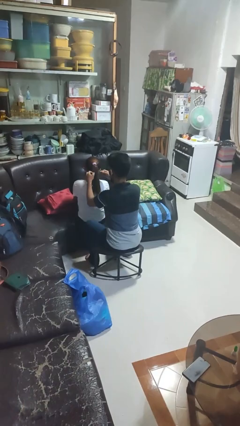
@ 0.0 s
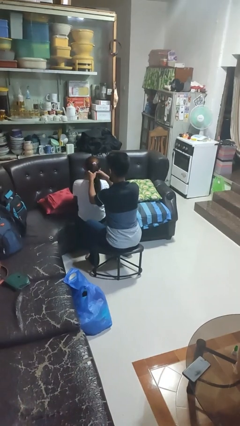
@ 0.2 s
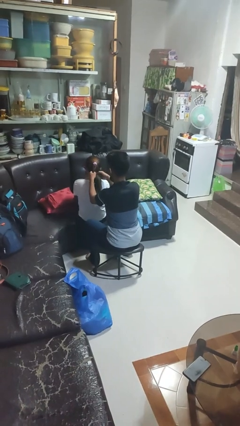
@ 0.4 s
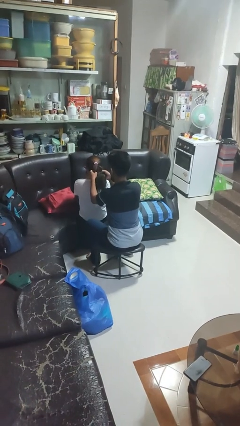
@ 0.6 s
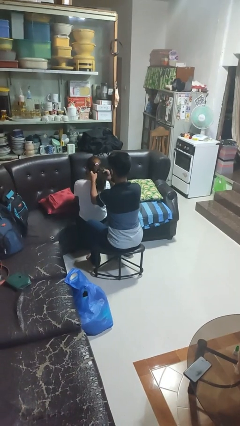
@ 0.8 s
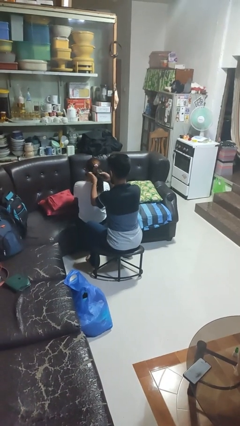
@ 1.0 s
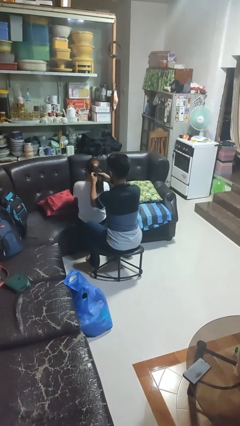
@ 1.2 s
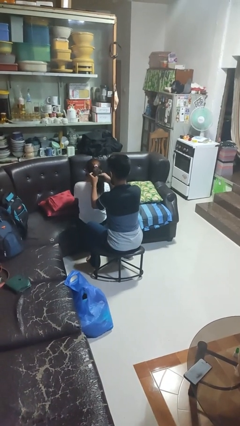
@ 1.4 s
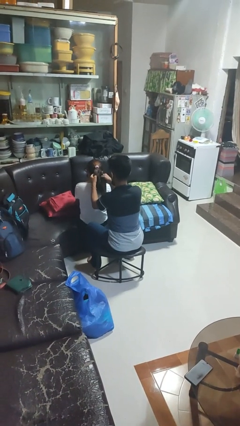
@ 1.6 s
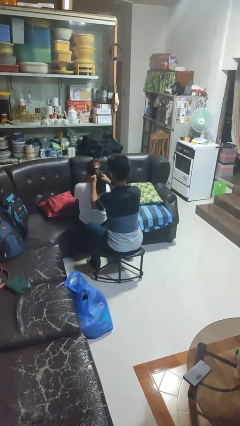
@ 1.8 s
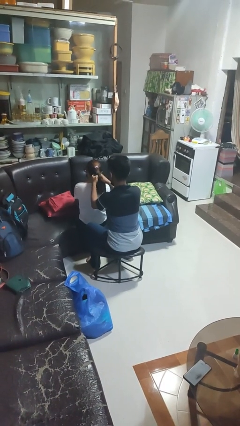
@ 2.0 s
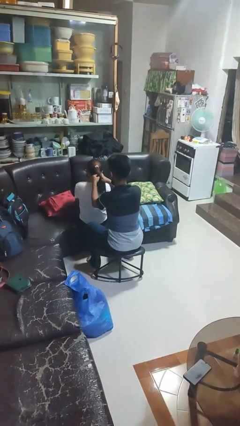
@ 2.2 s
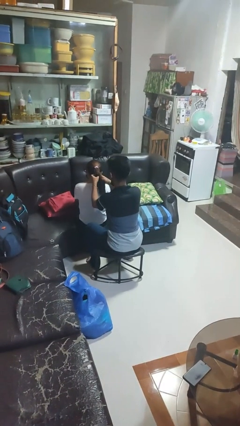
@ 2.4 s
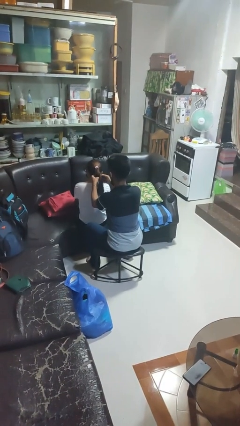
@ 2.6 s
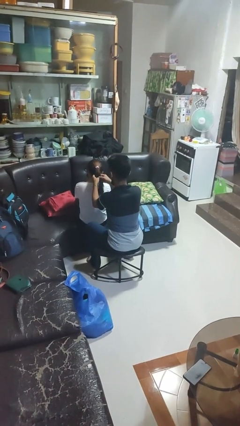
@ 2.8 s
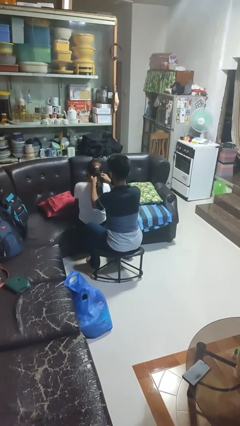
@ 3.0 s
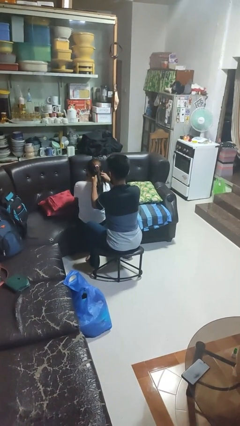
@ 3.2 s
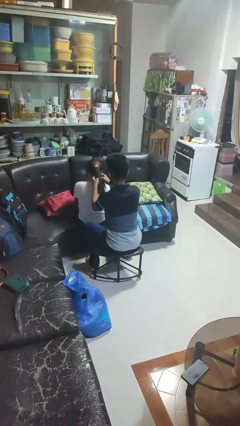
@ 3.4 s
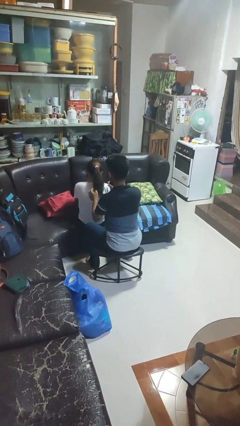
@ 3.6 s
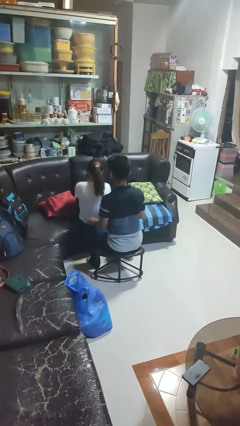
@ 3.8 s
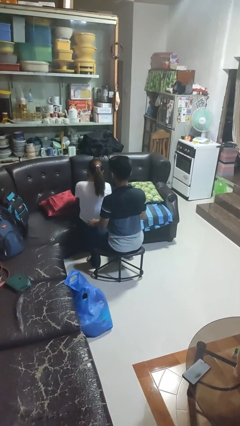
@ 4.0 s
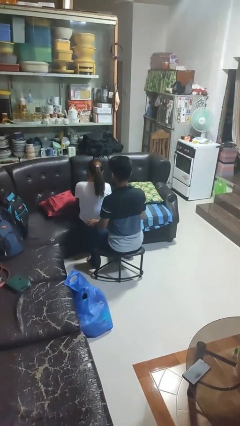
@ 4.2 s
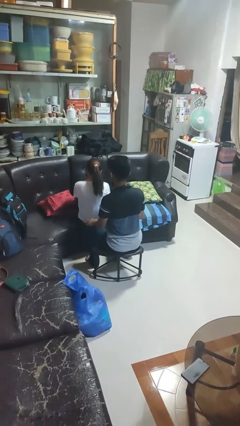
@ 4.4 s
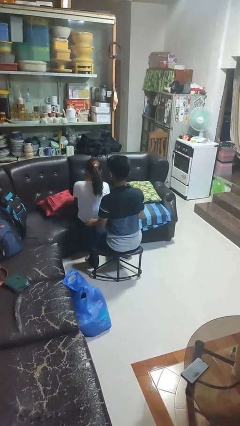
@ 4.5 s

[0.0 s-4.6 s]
person braids hair of person

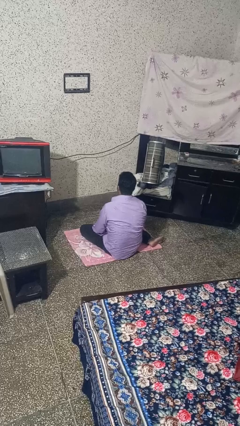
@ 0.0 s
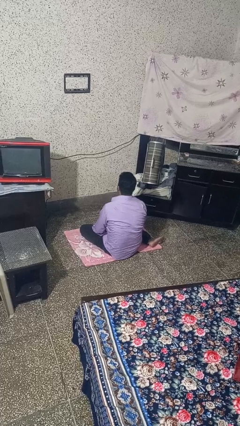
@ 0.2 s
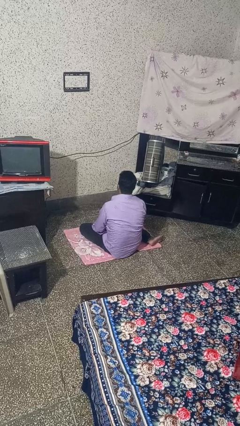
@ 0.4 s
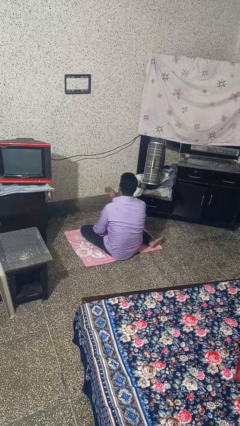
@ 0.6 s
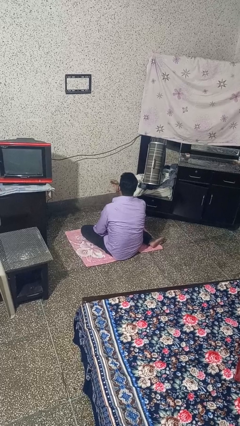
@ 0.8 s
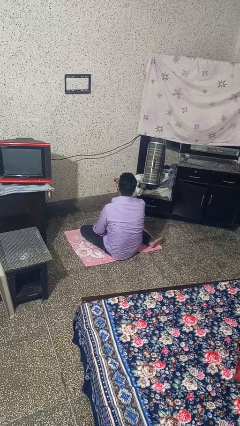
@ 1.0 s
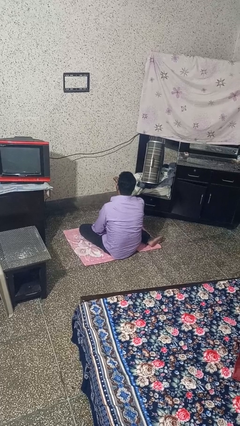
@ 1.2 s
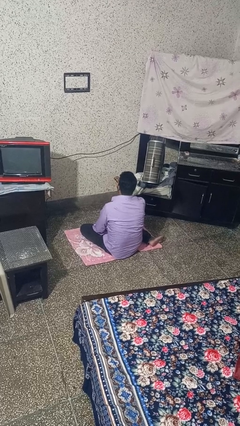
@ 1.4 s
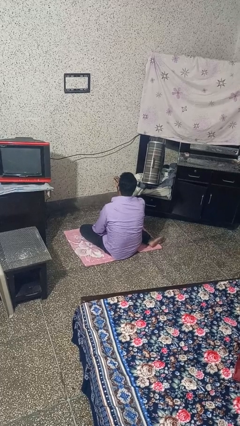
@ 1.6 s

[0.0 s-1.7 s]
person vapes

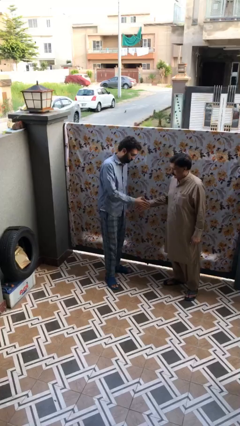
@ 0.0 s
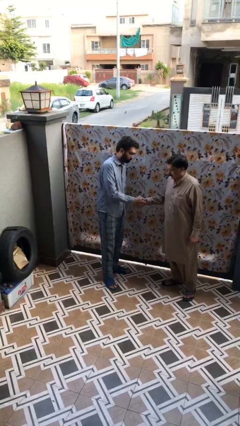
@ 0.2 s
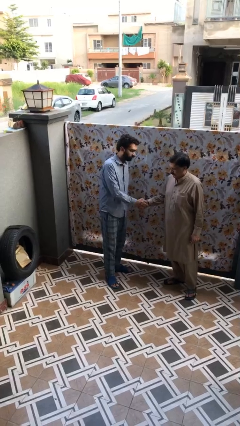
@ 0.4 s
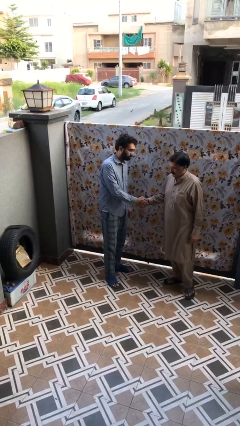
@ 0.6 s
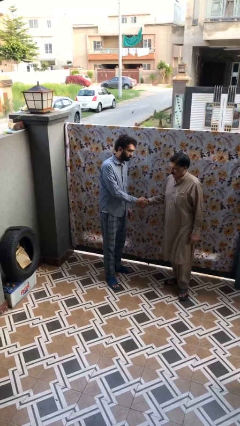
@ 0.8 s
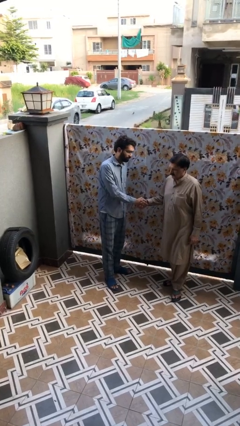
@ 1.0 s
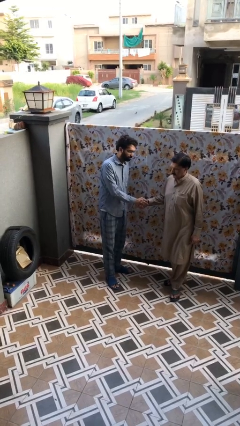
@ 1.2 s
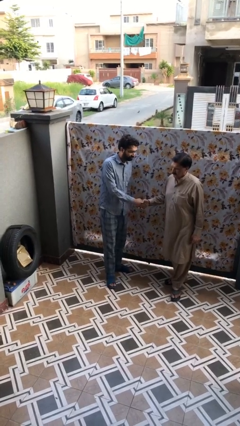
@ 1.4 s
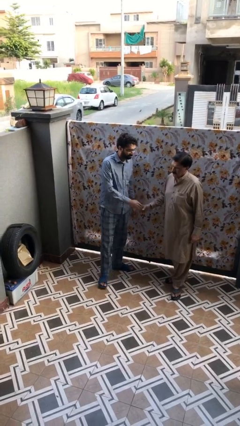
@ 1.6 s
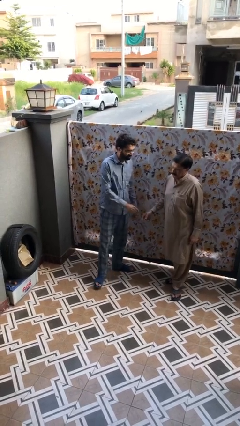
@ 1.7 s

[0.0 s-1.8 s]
person shakes hand

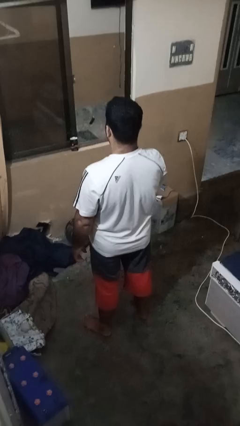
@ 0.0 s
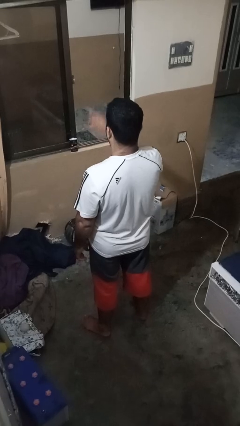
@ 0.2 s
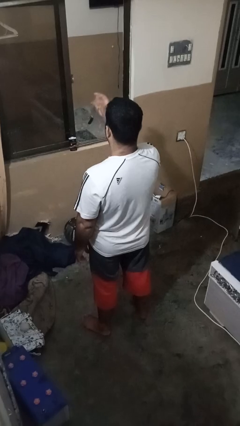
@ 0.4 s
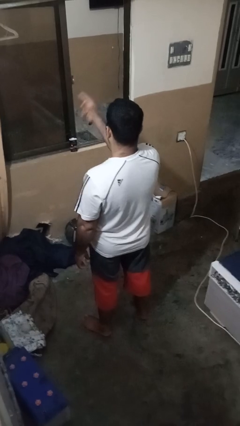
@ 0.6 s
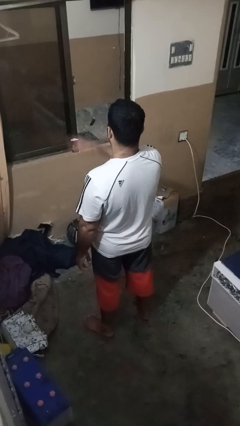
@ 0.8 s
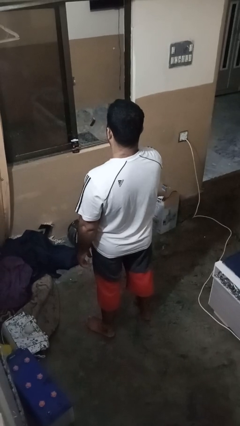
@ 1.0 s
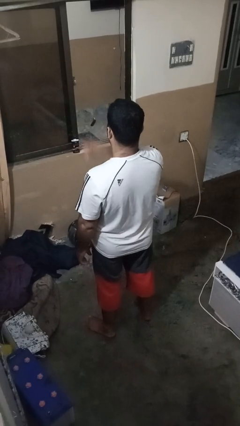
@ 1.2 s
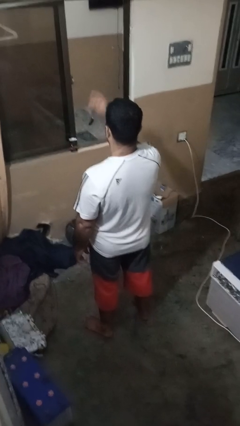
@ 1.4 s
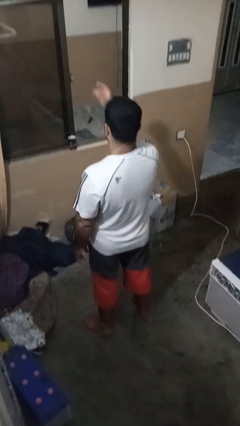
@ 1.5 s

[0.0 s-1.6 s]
person snaps fingers

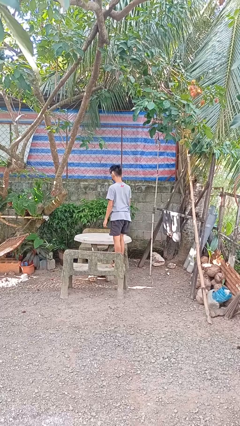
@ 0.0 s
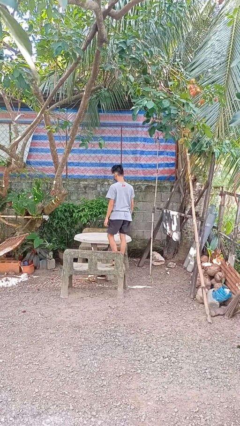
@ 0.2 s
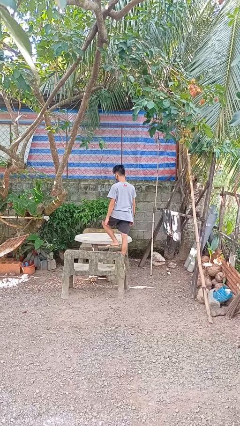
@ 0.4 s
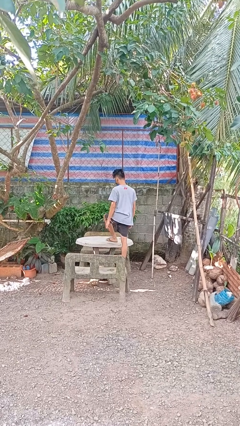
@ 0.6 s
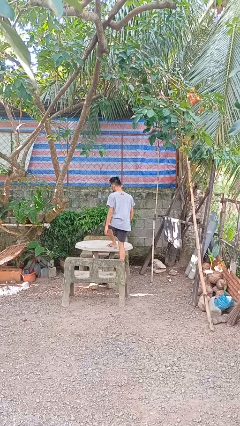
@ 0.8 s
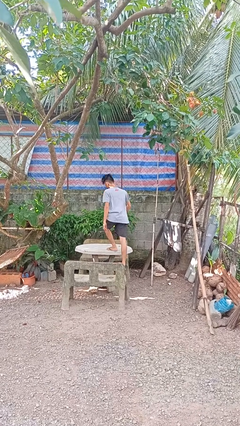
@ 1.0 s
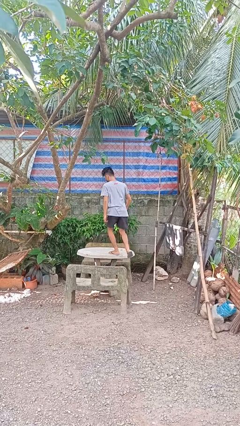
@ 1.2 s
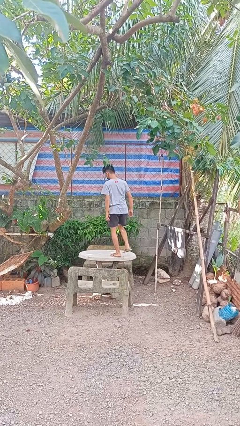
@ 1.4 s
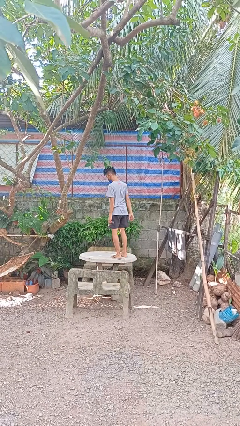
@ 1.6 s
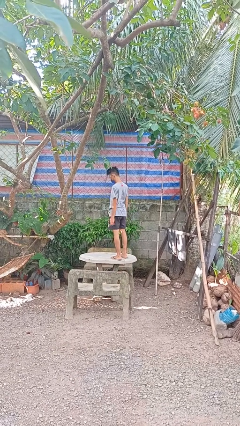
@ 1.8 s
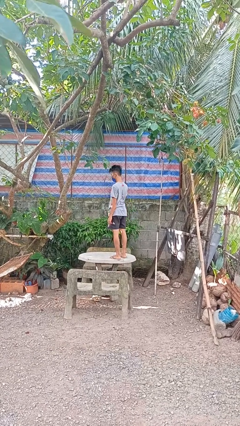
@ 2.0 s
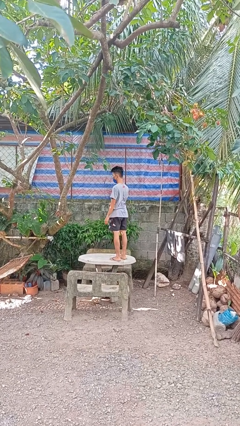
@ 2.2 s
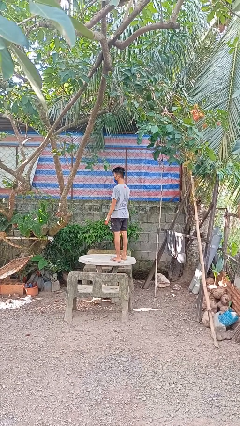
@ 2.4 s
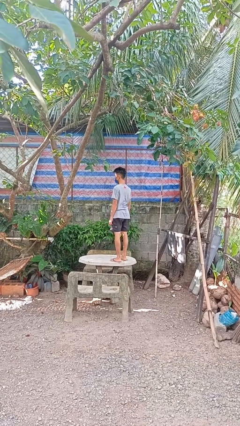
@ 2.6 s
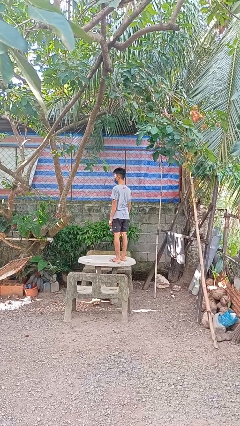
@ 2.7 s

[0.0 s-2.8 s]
person climbs on table

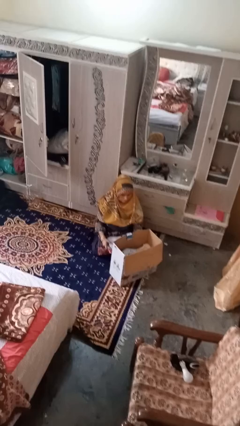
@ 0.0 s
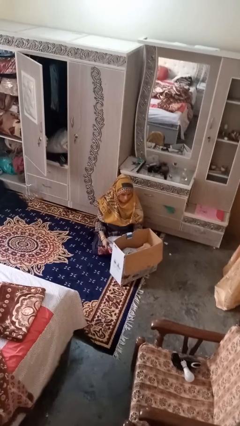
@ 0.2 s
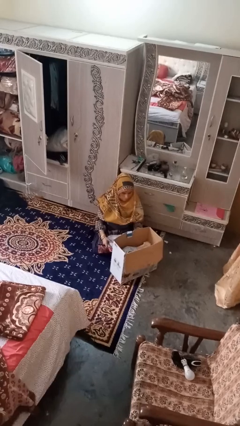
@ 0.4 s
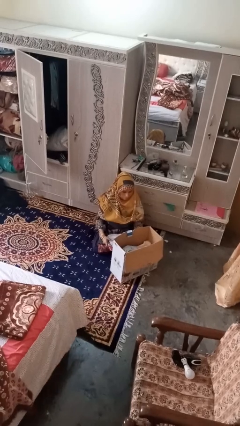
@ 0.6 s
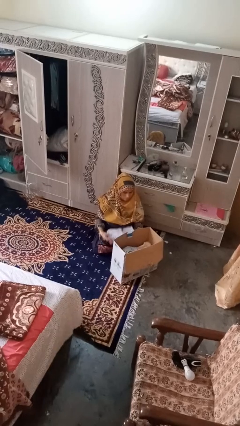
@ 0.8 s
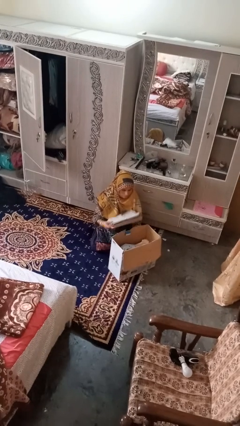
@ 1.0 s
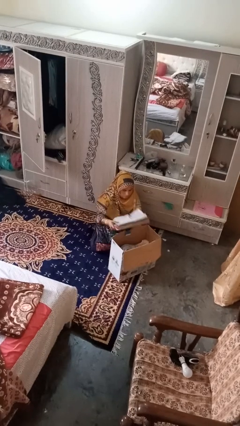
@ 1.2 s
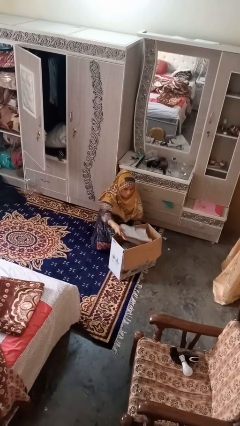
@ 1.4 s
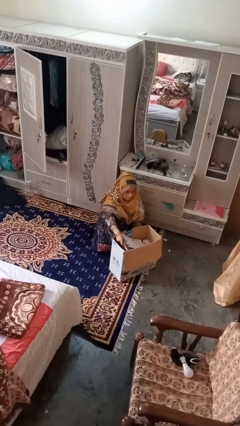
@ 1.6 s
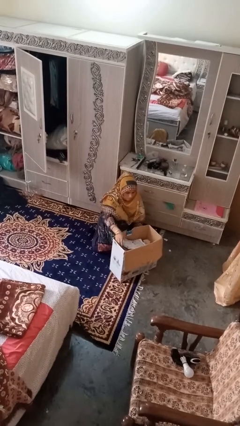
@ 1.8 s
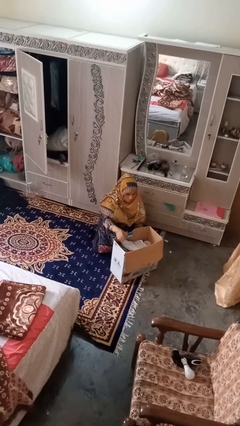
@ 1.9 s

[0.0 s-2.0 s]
person puts object into box

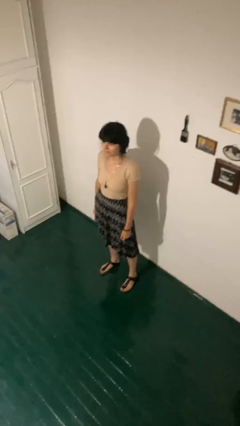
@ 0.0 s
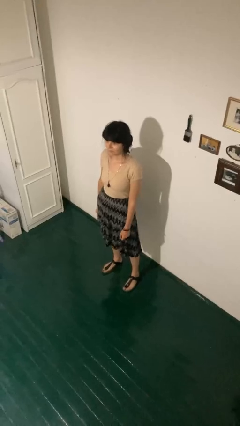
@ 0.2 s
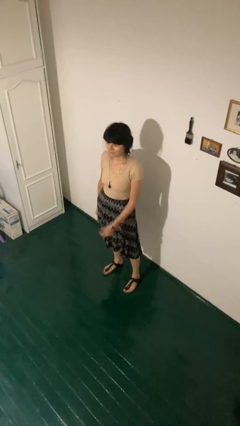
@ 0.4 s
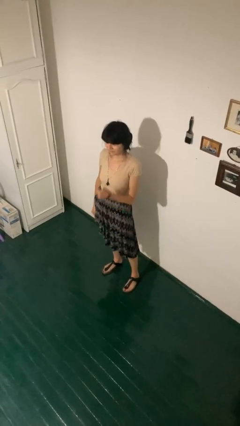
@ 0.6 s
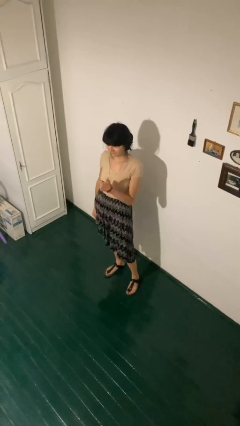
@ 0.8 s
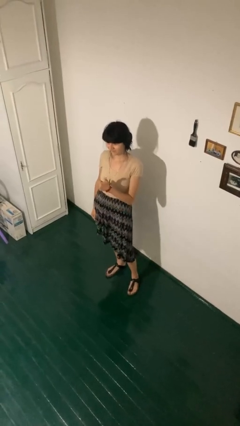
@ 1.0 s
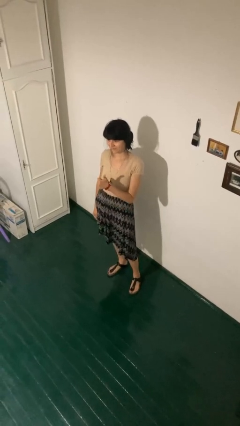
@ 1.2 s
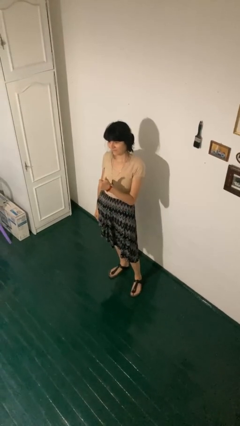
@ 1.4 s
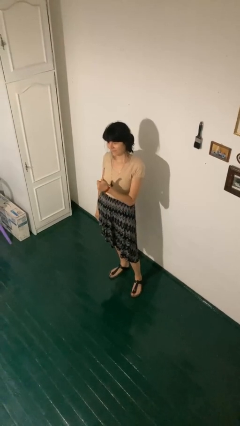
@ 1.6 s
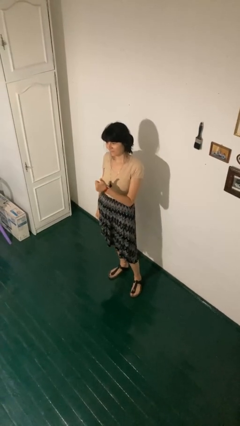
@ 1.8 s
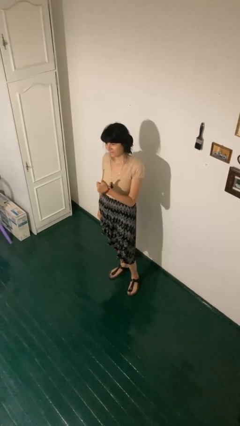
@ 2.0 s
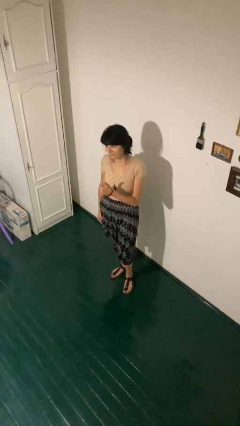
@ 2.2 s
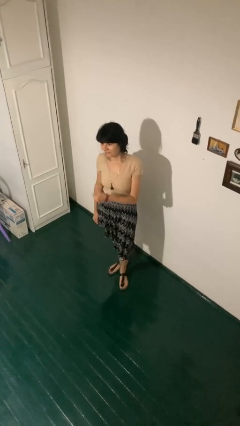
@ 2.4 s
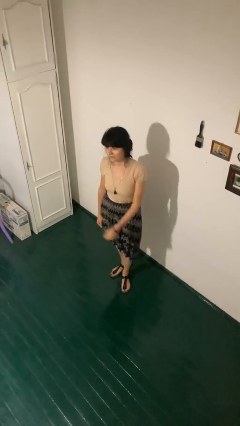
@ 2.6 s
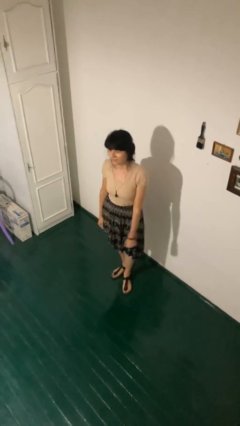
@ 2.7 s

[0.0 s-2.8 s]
person gestures thumbs up
